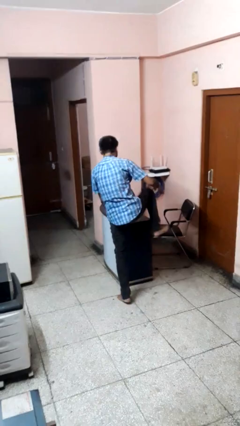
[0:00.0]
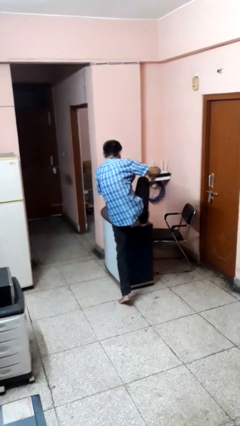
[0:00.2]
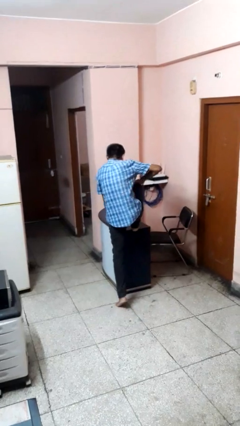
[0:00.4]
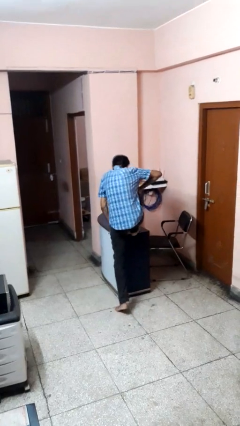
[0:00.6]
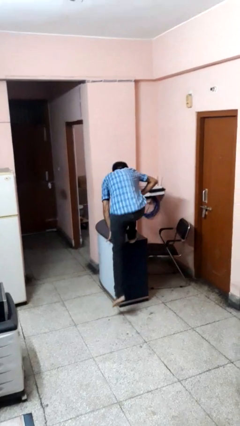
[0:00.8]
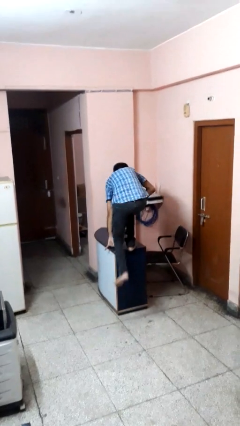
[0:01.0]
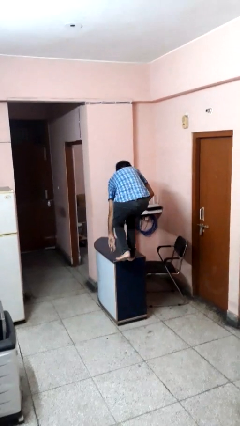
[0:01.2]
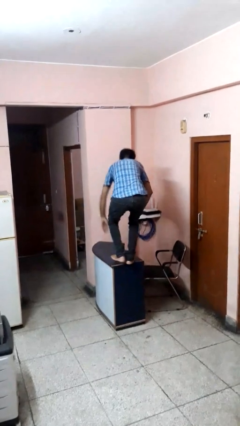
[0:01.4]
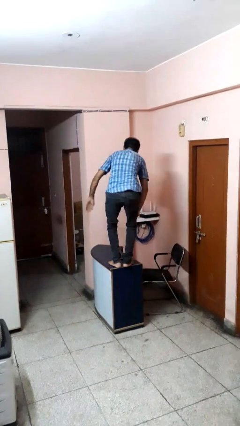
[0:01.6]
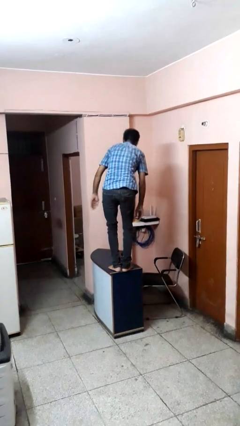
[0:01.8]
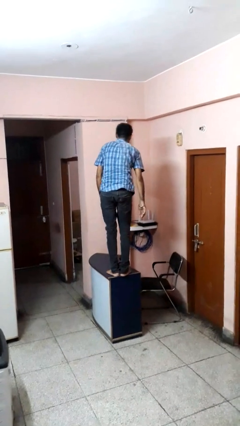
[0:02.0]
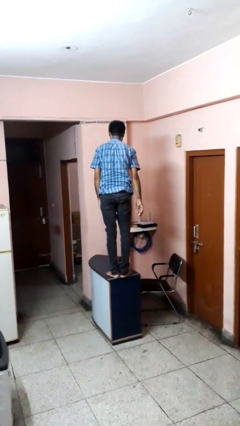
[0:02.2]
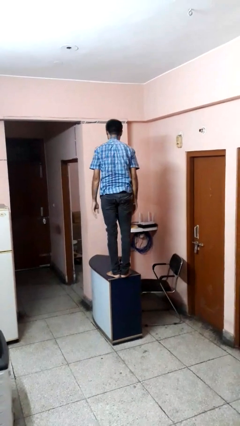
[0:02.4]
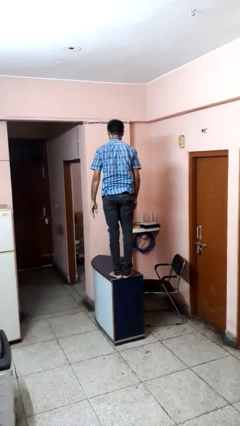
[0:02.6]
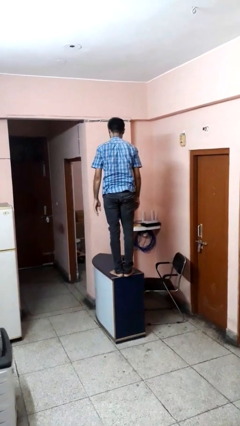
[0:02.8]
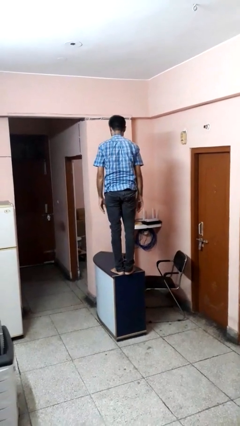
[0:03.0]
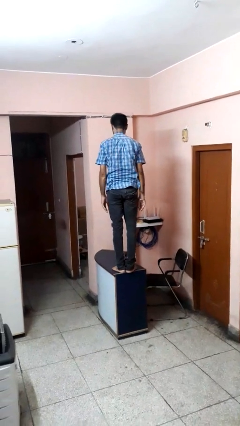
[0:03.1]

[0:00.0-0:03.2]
person climbs on table

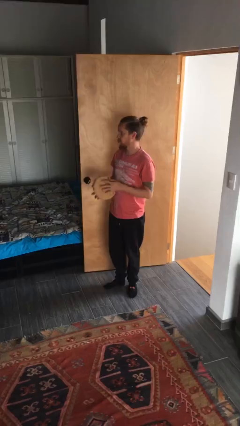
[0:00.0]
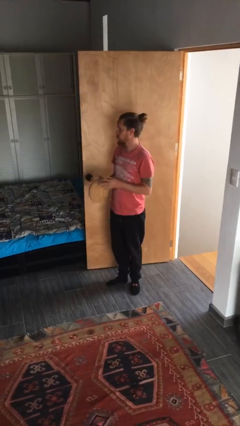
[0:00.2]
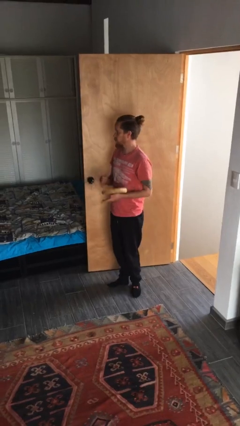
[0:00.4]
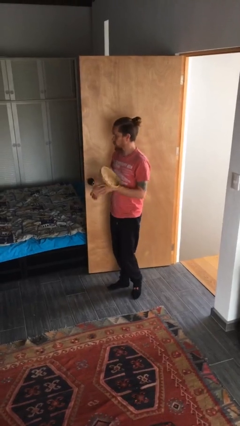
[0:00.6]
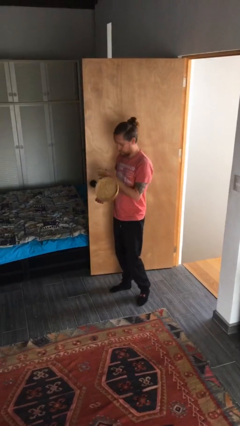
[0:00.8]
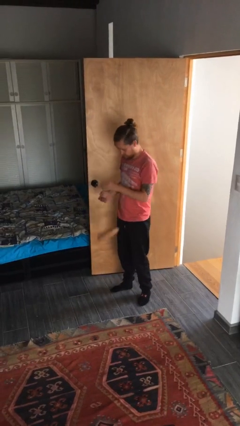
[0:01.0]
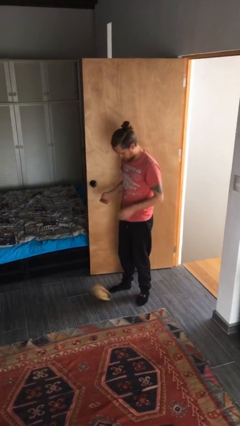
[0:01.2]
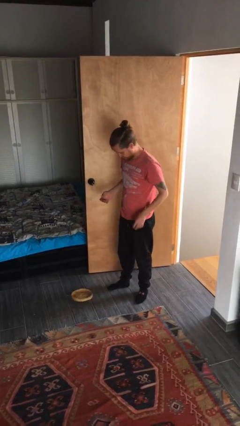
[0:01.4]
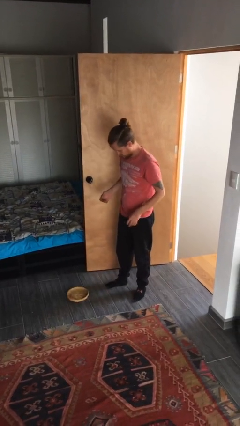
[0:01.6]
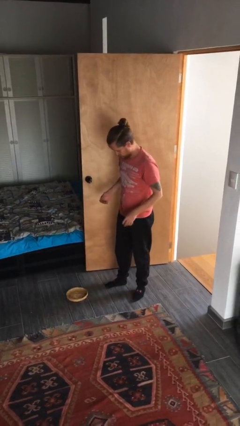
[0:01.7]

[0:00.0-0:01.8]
person drops object

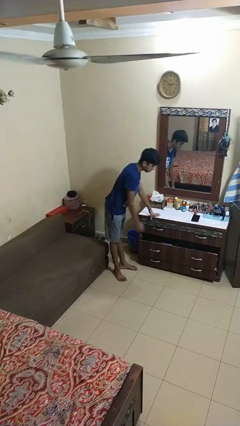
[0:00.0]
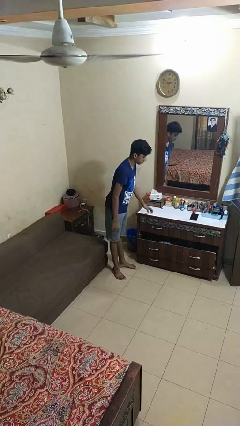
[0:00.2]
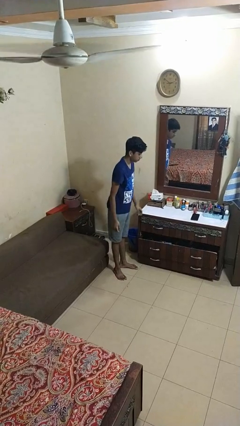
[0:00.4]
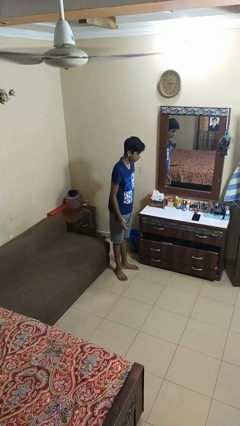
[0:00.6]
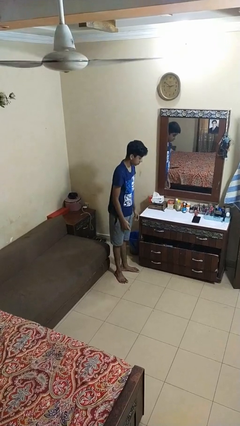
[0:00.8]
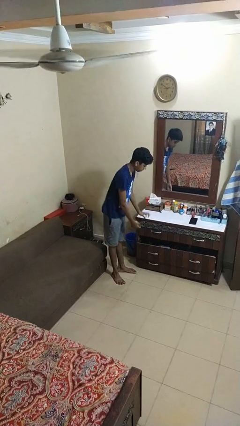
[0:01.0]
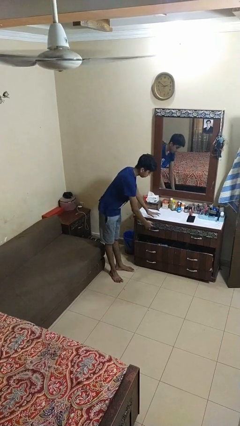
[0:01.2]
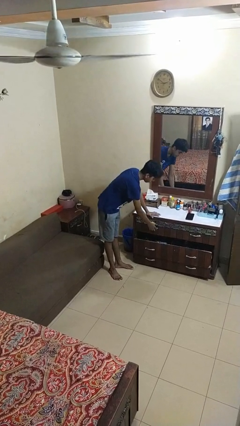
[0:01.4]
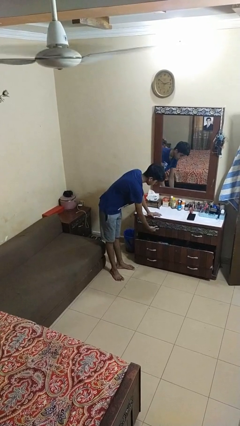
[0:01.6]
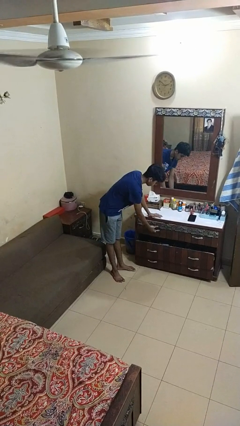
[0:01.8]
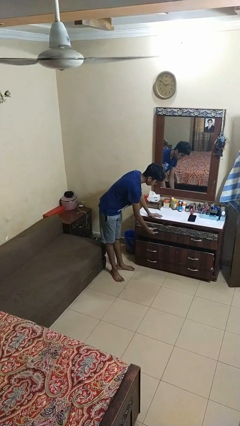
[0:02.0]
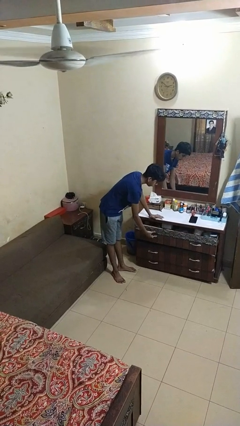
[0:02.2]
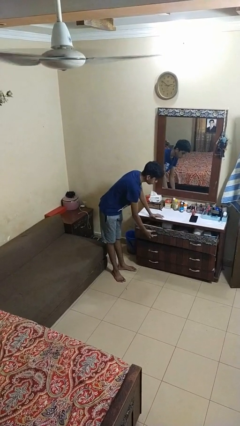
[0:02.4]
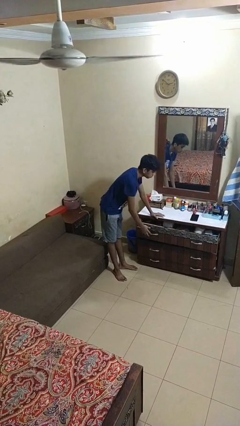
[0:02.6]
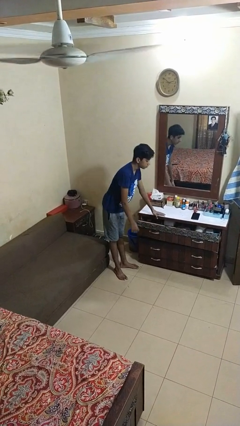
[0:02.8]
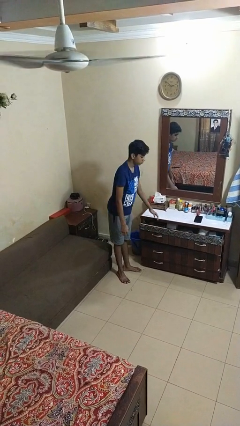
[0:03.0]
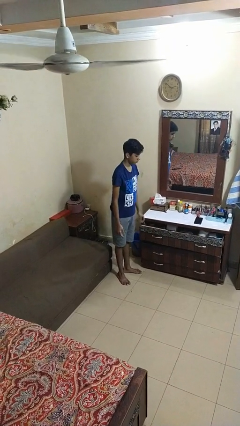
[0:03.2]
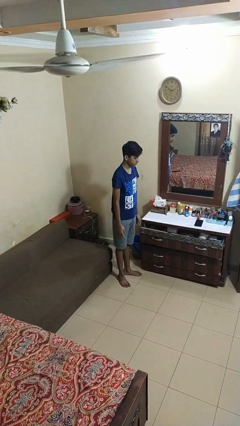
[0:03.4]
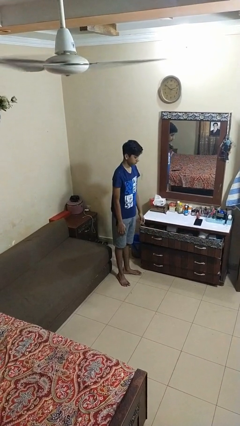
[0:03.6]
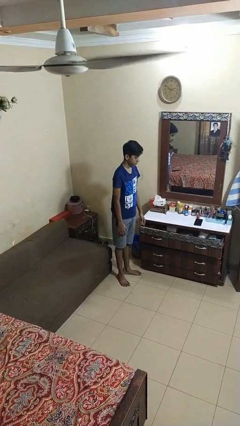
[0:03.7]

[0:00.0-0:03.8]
person opens dresser drawer

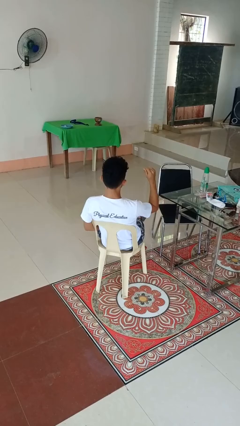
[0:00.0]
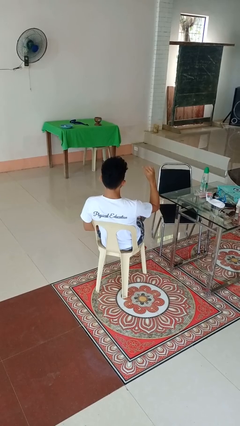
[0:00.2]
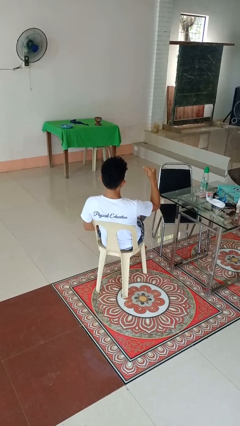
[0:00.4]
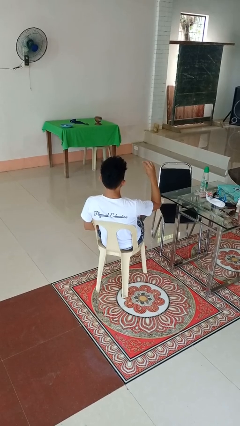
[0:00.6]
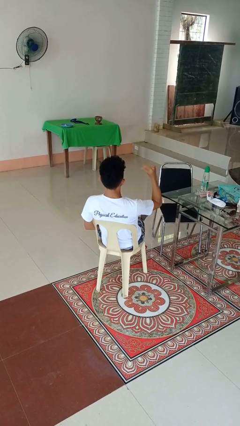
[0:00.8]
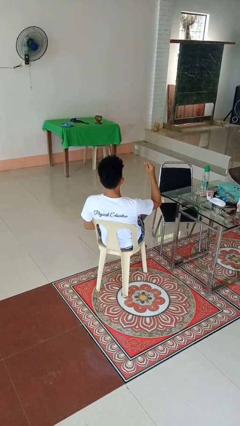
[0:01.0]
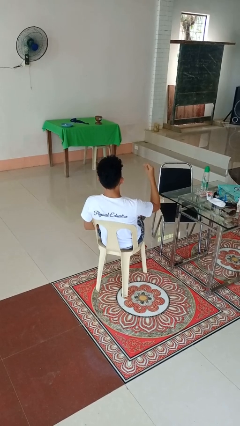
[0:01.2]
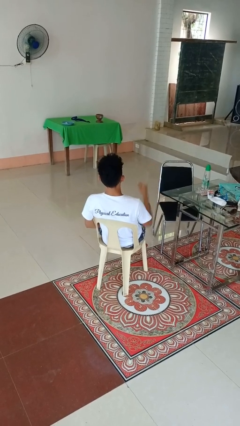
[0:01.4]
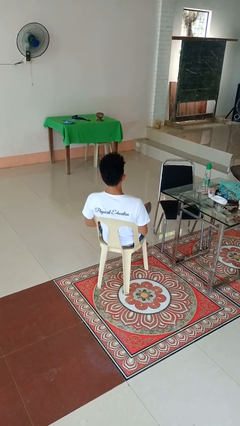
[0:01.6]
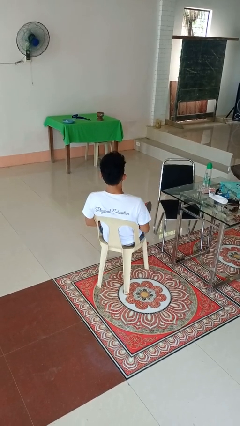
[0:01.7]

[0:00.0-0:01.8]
person snaps fingers

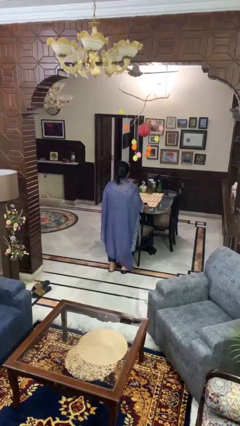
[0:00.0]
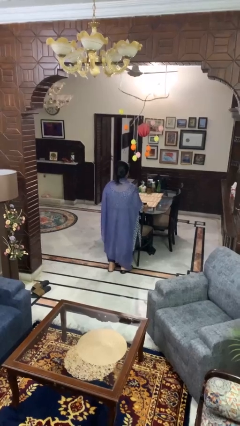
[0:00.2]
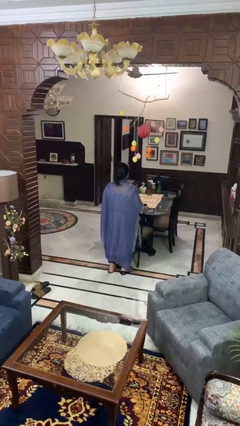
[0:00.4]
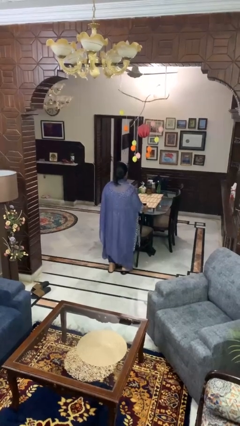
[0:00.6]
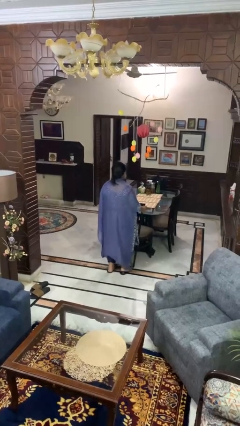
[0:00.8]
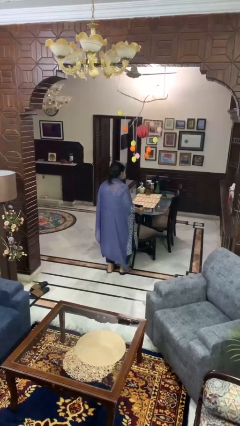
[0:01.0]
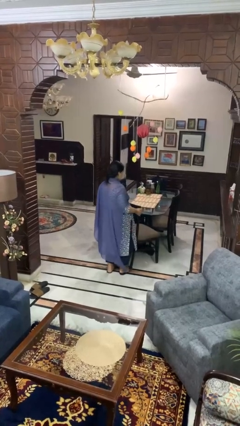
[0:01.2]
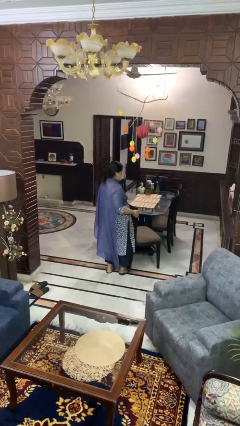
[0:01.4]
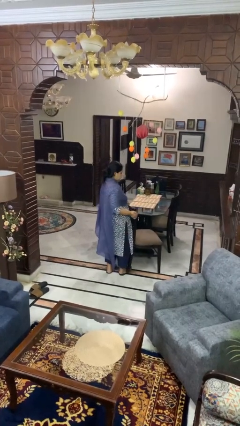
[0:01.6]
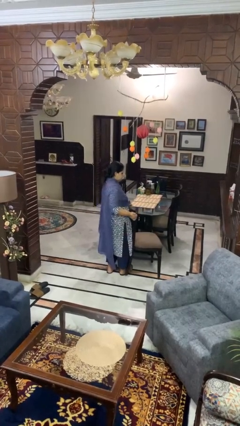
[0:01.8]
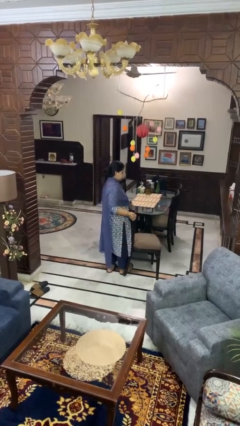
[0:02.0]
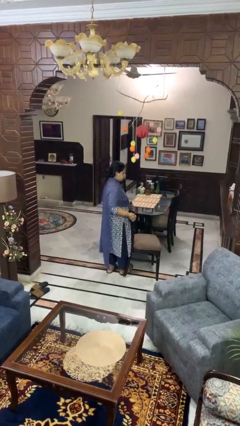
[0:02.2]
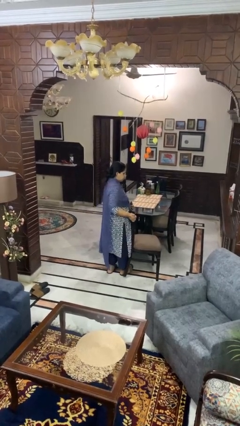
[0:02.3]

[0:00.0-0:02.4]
person pulls out chair

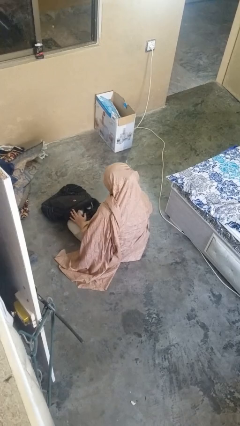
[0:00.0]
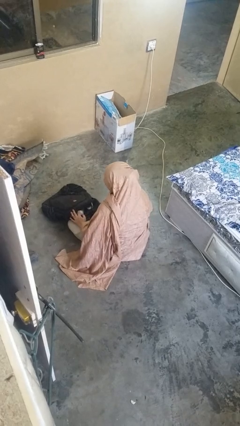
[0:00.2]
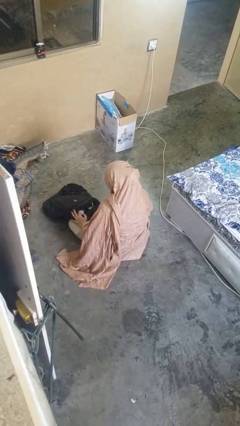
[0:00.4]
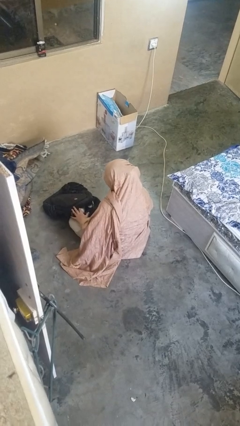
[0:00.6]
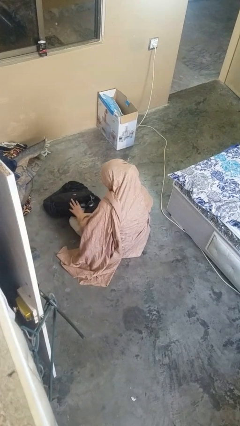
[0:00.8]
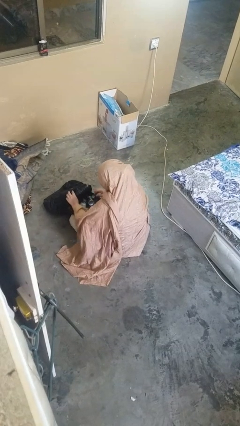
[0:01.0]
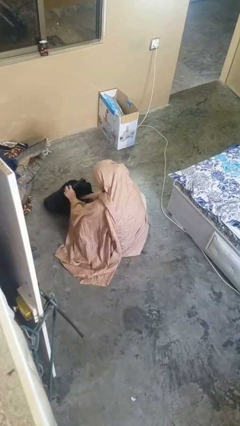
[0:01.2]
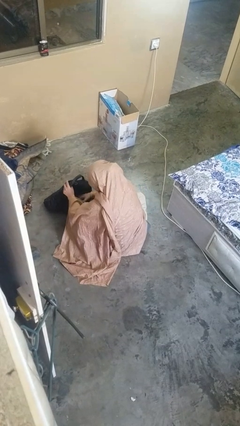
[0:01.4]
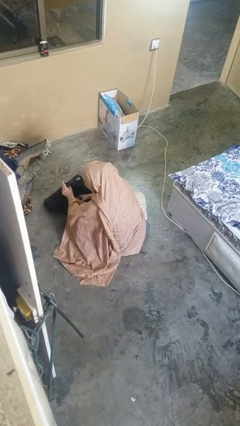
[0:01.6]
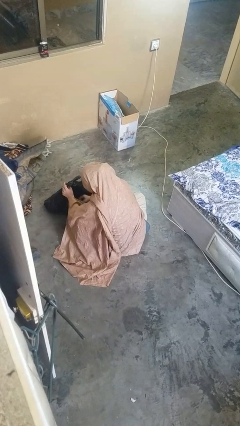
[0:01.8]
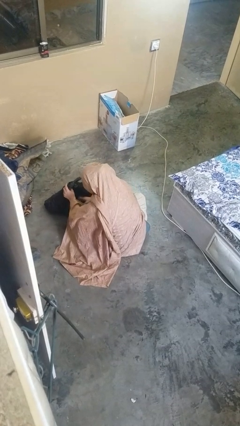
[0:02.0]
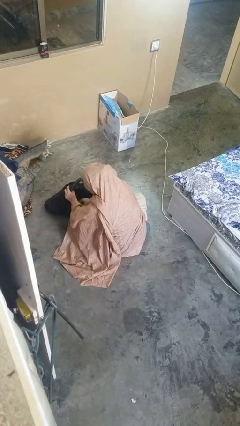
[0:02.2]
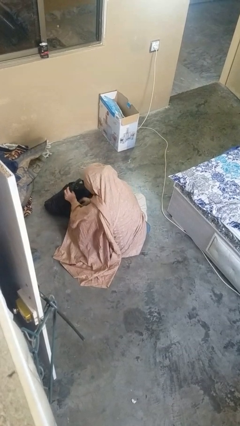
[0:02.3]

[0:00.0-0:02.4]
person searches in backpack

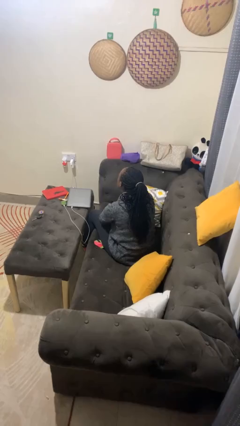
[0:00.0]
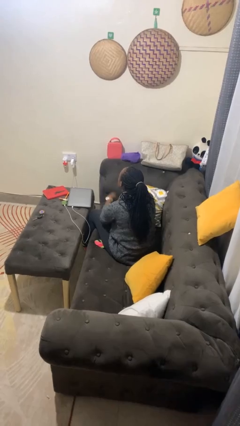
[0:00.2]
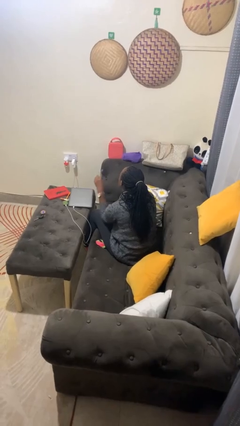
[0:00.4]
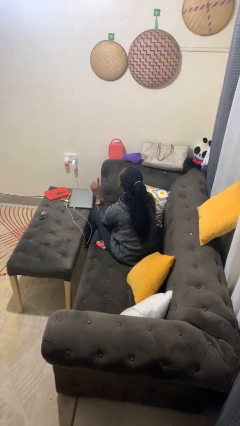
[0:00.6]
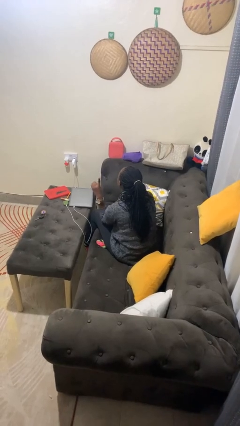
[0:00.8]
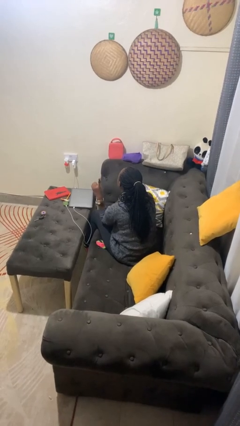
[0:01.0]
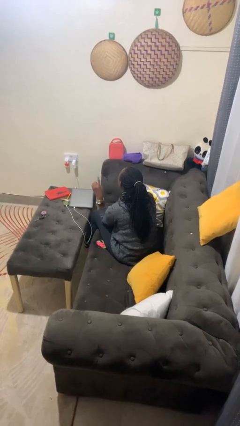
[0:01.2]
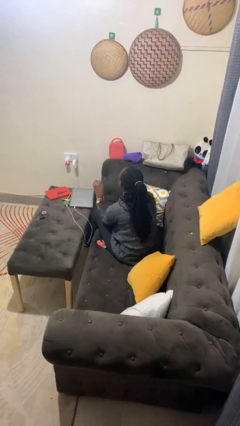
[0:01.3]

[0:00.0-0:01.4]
person gestures number one

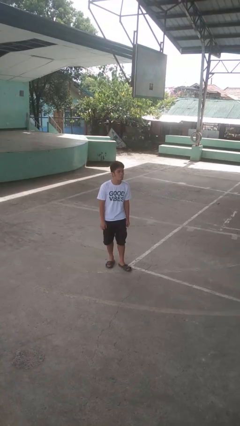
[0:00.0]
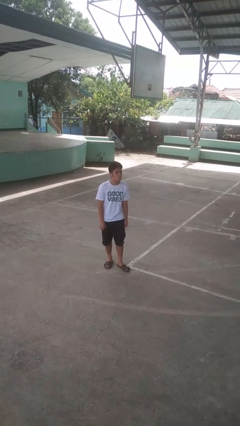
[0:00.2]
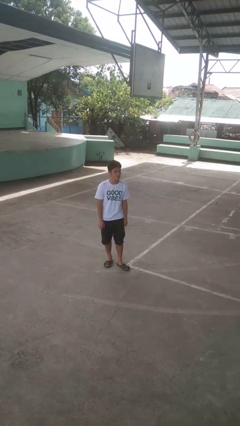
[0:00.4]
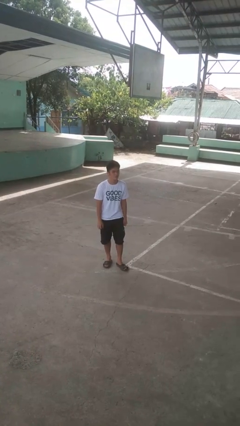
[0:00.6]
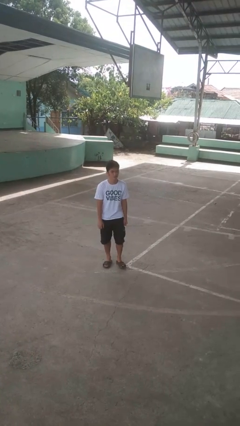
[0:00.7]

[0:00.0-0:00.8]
person sticks out tongue
